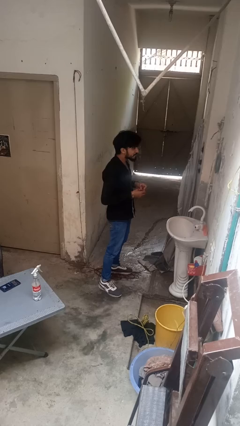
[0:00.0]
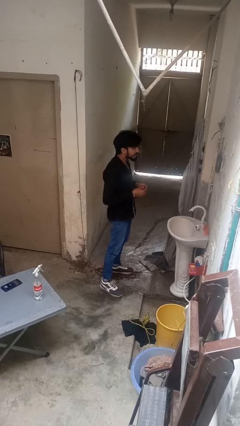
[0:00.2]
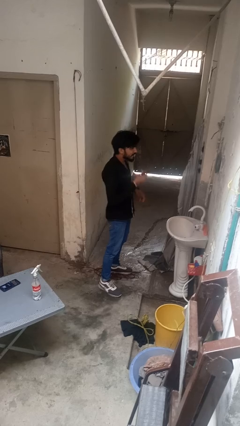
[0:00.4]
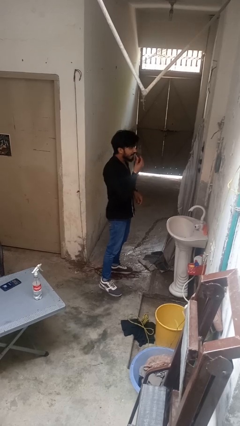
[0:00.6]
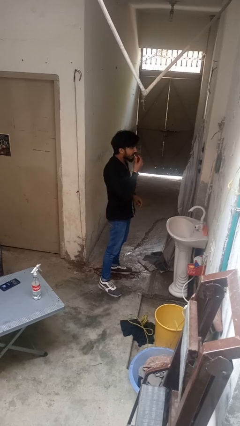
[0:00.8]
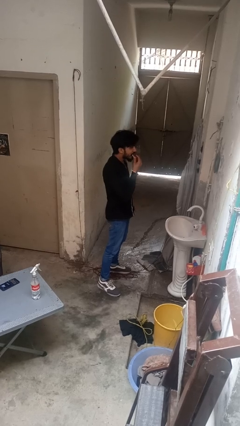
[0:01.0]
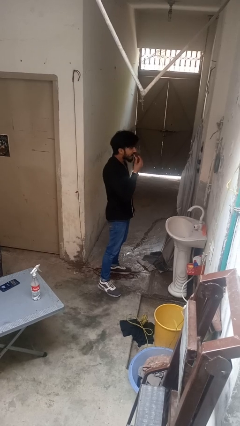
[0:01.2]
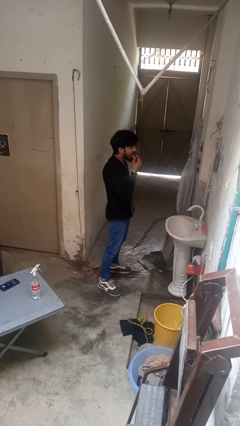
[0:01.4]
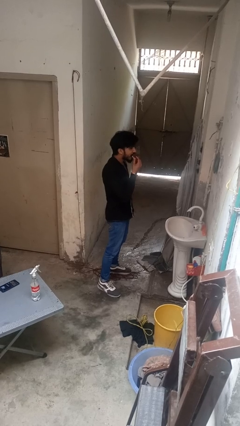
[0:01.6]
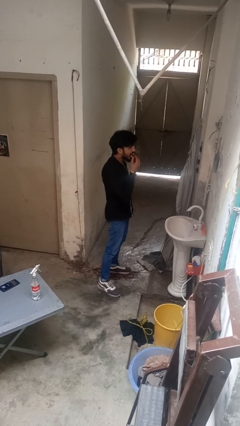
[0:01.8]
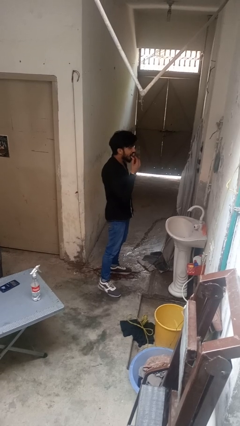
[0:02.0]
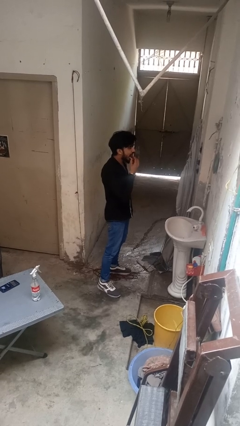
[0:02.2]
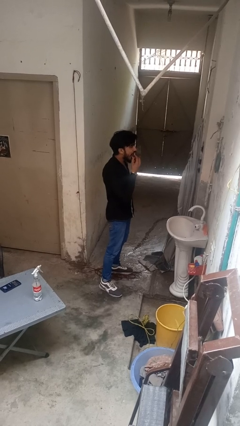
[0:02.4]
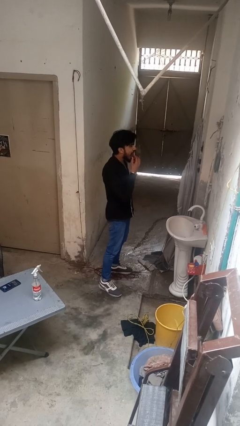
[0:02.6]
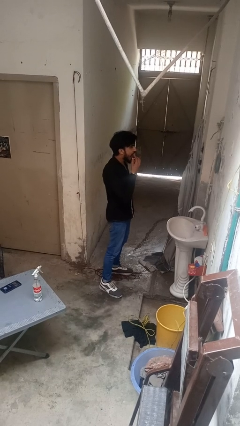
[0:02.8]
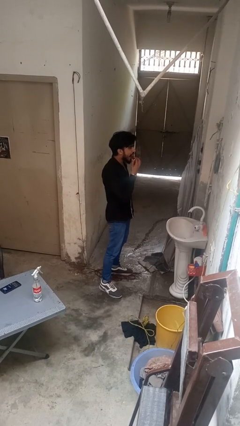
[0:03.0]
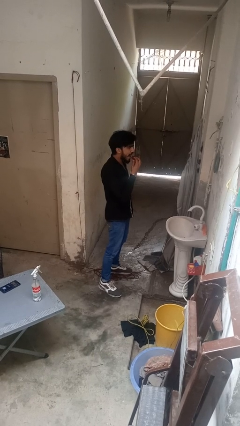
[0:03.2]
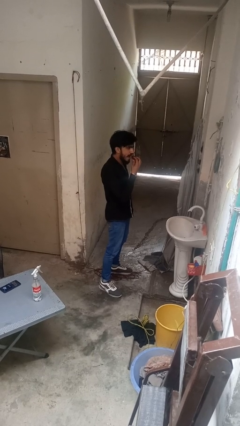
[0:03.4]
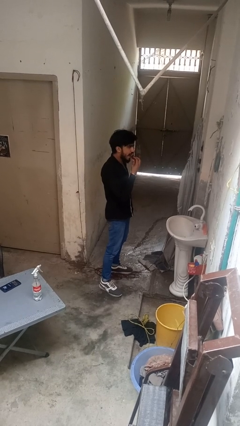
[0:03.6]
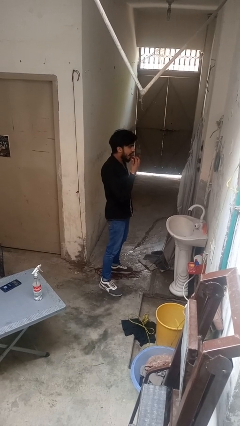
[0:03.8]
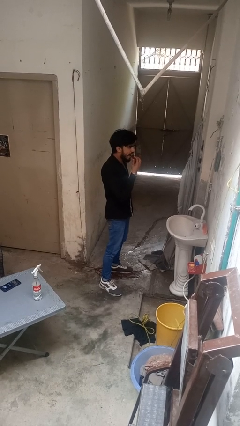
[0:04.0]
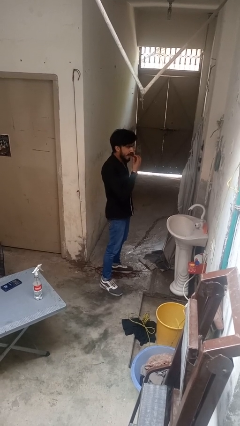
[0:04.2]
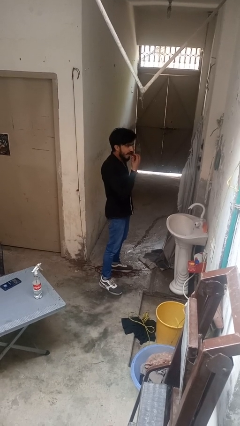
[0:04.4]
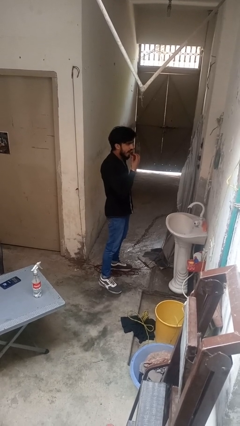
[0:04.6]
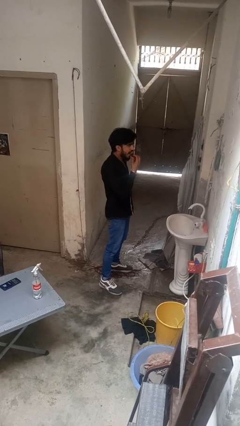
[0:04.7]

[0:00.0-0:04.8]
person applies lip makeup

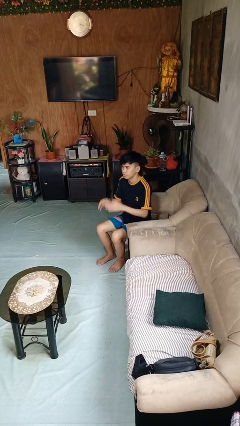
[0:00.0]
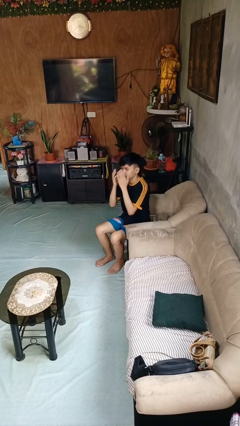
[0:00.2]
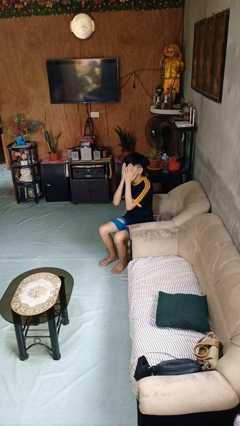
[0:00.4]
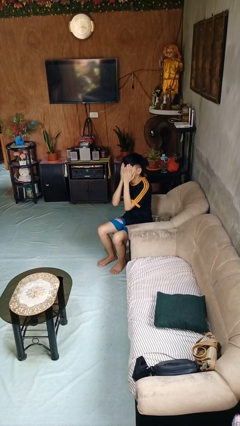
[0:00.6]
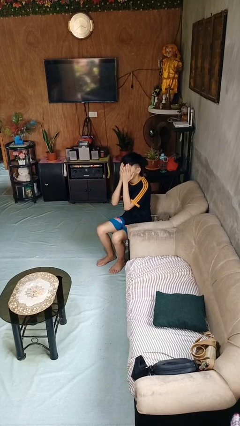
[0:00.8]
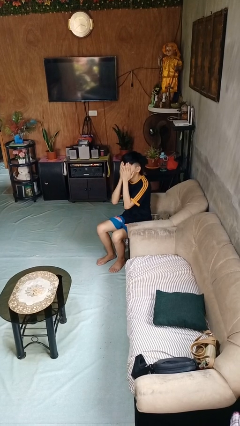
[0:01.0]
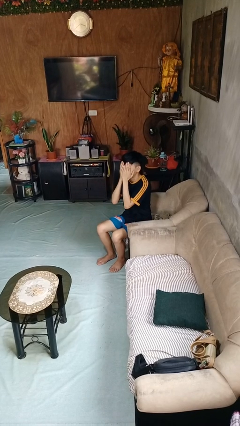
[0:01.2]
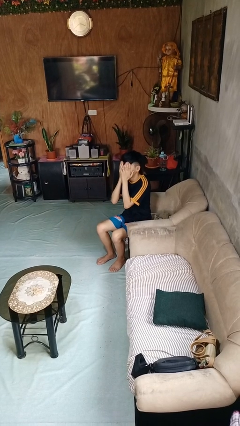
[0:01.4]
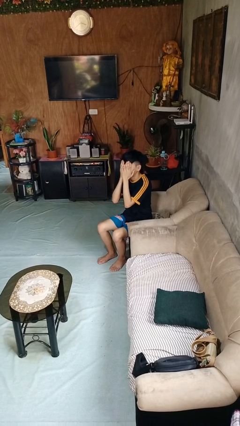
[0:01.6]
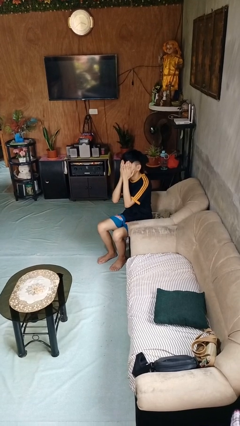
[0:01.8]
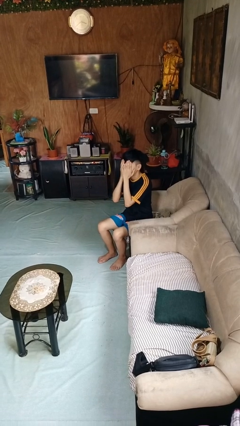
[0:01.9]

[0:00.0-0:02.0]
person covers face with hands

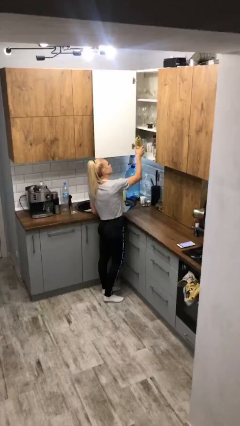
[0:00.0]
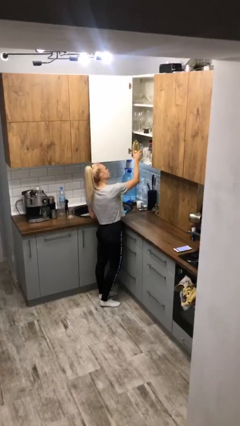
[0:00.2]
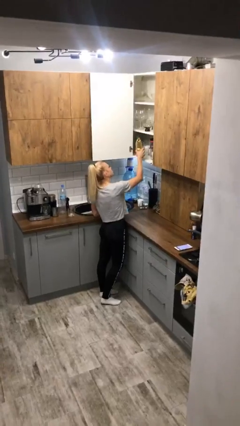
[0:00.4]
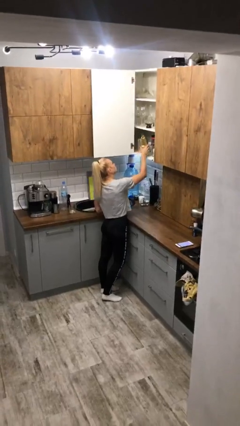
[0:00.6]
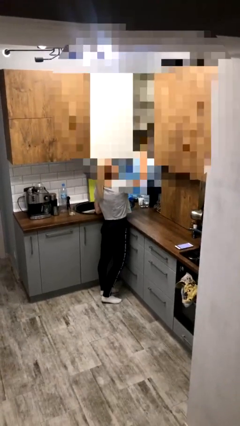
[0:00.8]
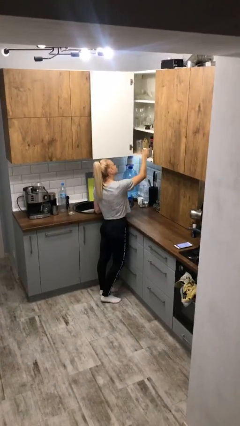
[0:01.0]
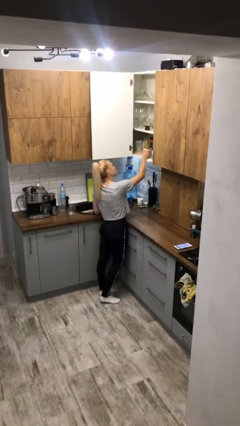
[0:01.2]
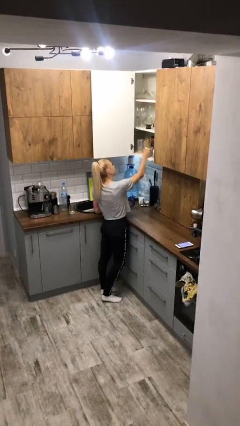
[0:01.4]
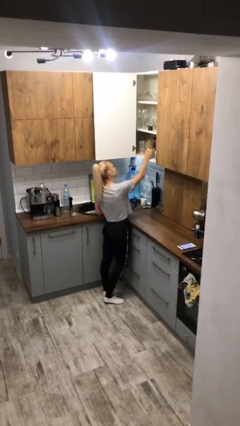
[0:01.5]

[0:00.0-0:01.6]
person puts down object on shelf

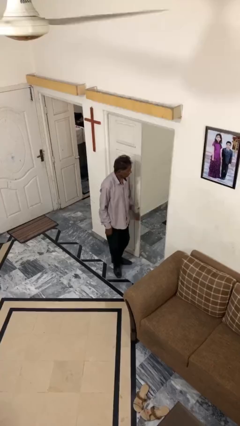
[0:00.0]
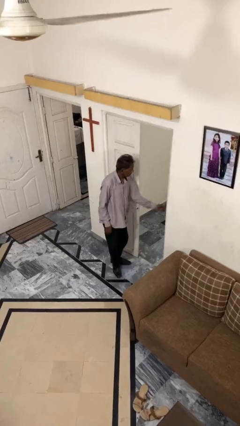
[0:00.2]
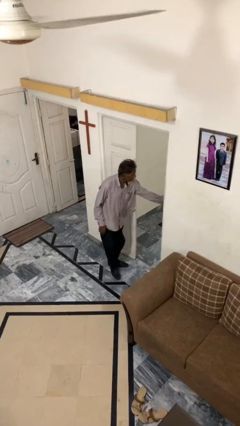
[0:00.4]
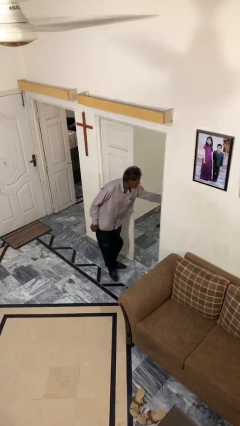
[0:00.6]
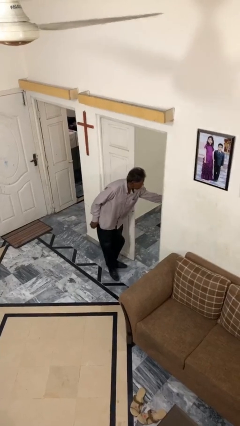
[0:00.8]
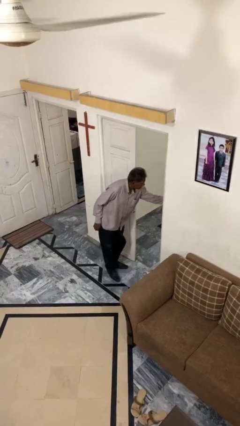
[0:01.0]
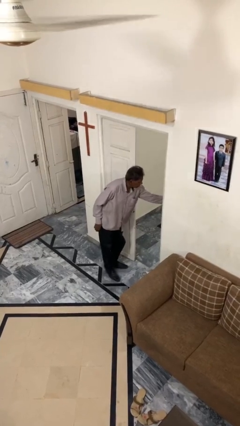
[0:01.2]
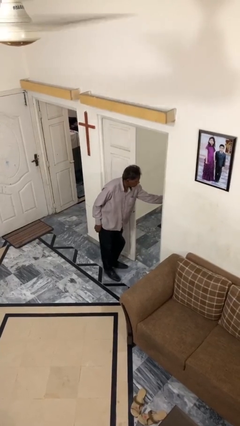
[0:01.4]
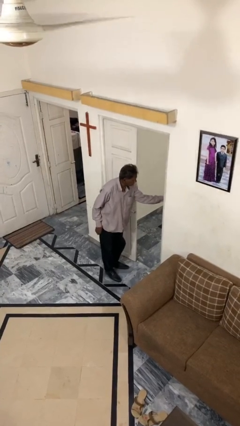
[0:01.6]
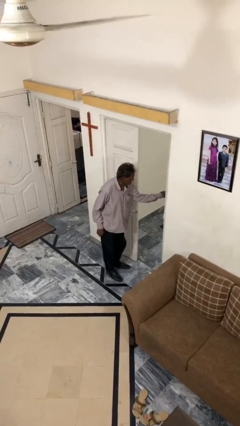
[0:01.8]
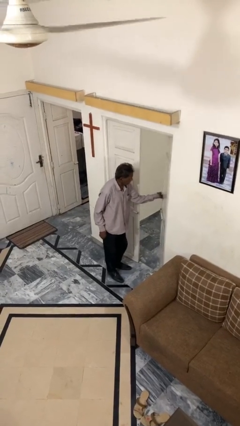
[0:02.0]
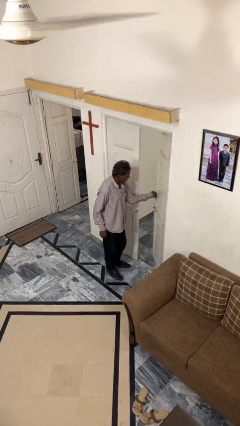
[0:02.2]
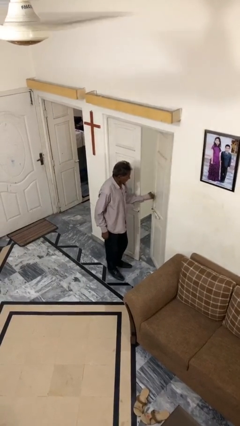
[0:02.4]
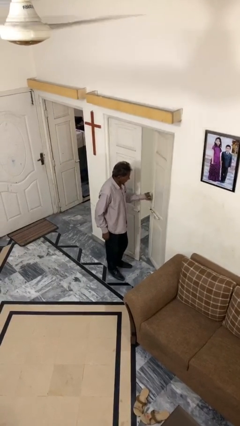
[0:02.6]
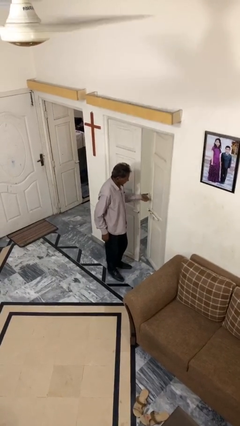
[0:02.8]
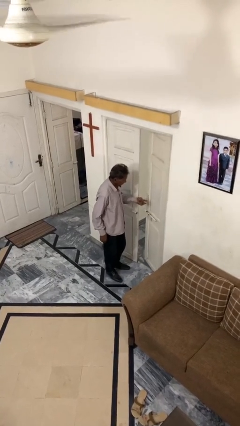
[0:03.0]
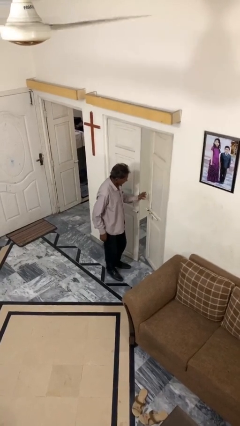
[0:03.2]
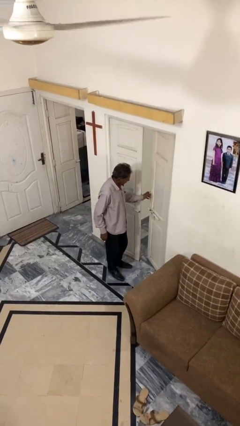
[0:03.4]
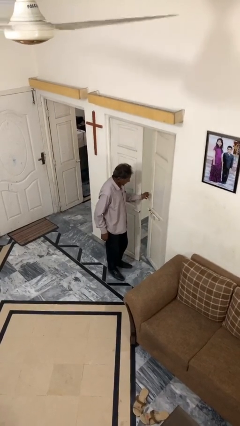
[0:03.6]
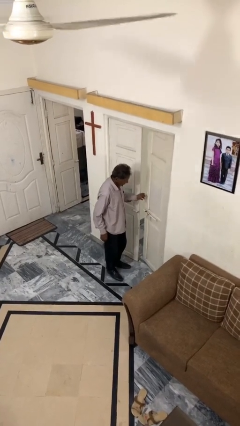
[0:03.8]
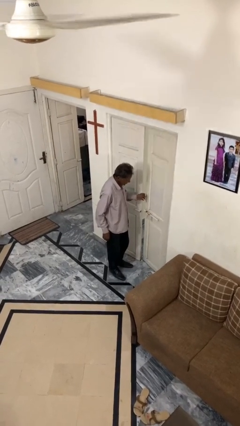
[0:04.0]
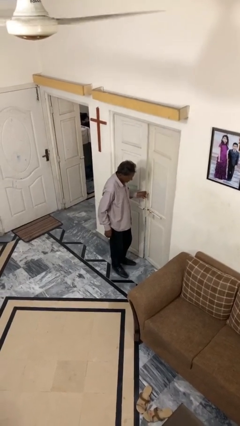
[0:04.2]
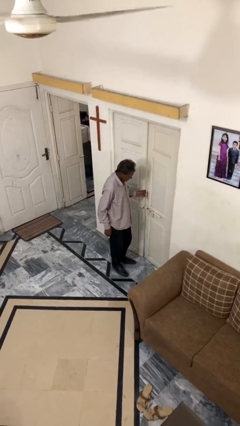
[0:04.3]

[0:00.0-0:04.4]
person closes facility door

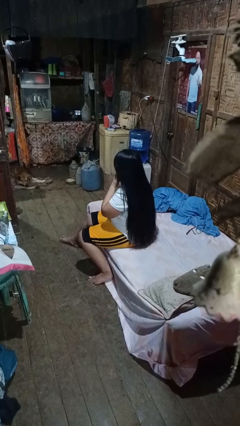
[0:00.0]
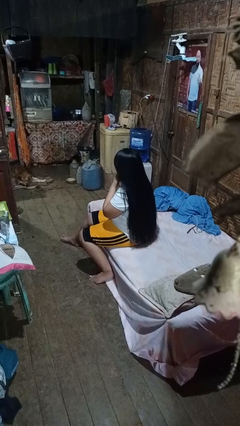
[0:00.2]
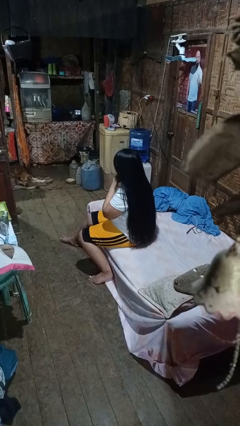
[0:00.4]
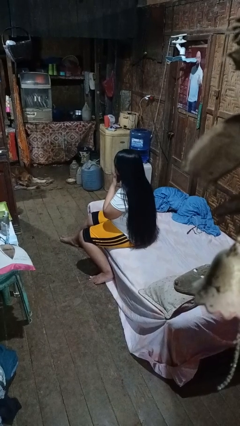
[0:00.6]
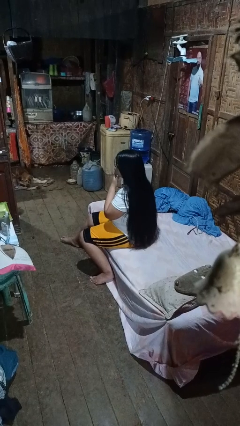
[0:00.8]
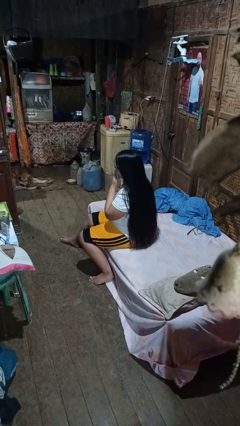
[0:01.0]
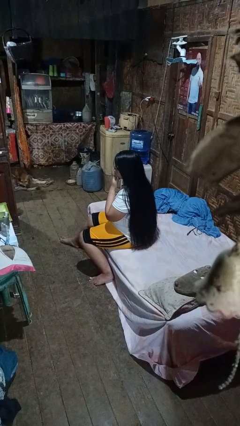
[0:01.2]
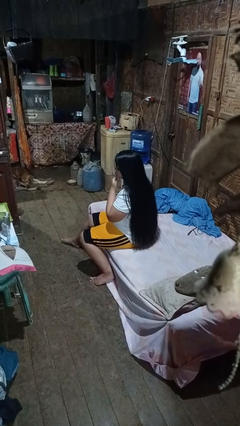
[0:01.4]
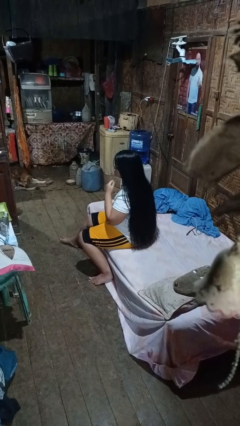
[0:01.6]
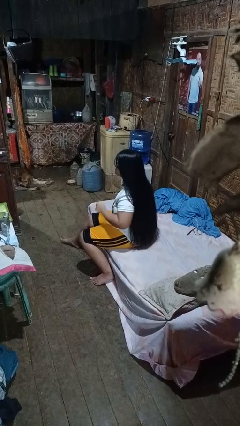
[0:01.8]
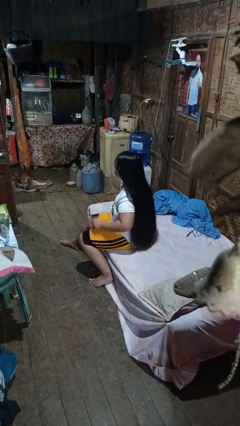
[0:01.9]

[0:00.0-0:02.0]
person strokes chin

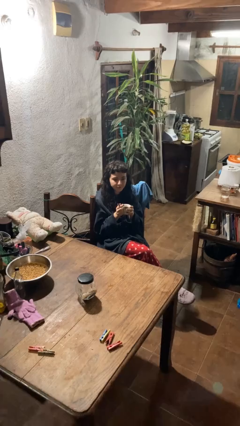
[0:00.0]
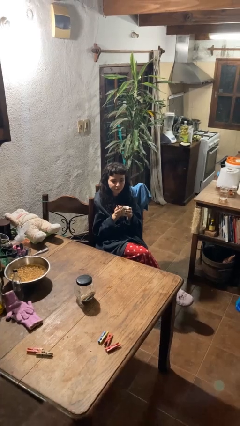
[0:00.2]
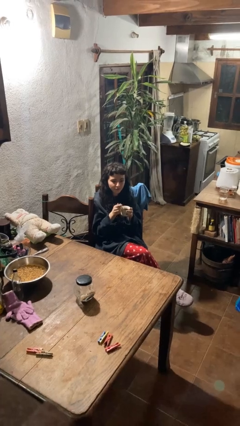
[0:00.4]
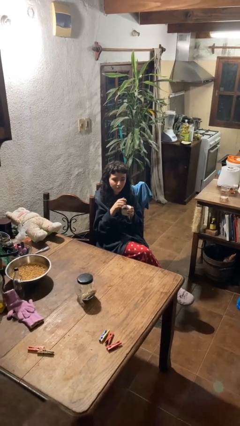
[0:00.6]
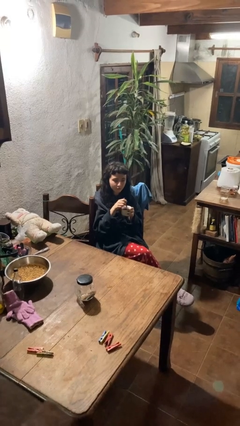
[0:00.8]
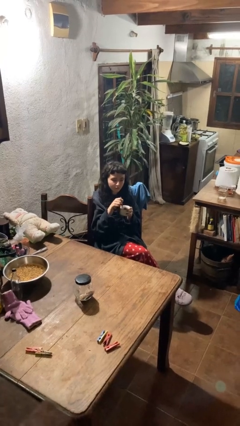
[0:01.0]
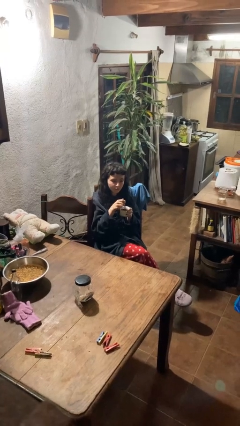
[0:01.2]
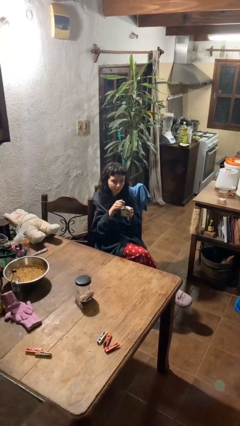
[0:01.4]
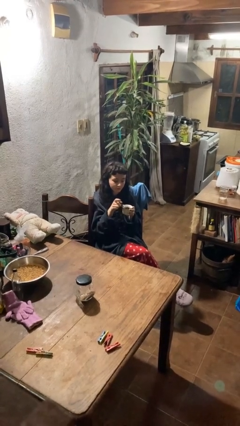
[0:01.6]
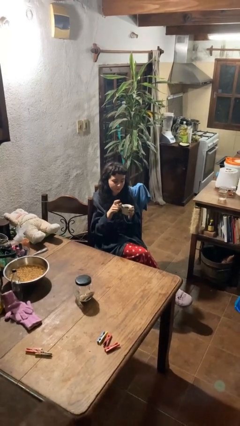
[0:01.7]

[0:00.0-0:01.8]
person stirs mug

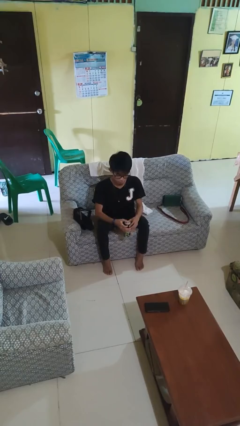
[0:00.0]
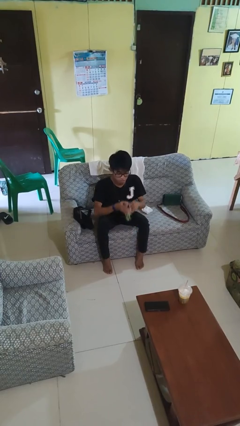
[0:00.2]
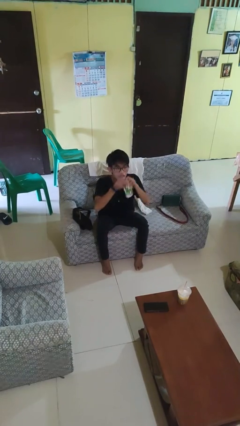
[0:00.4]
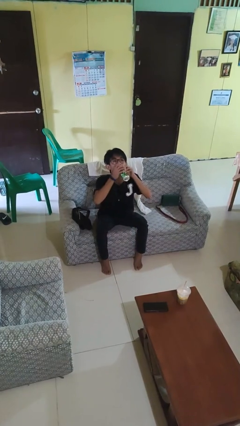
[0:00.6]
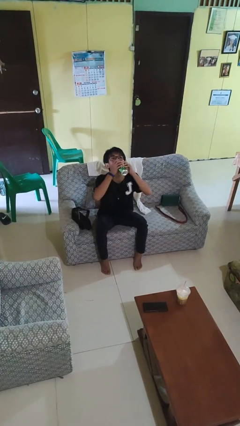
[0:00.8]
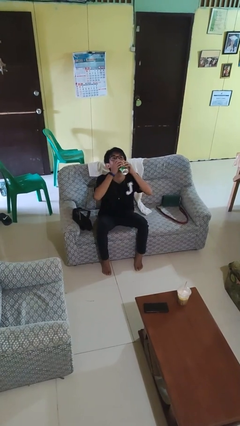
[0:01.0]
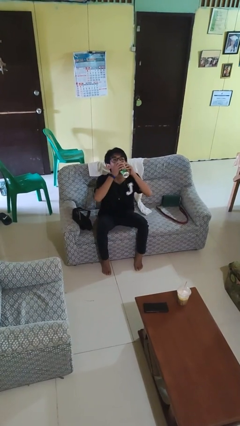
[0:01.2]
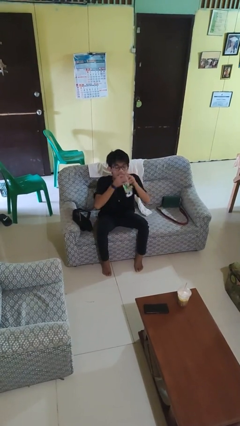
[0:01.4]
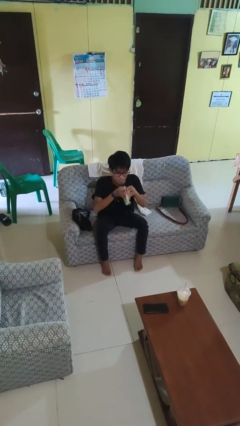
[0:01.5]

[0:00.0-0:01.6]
person drinks from beverage can
